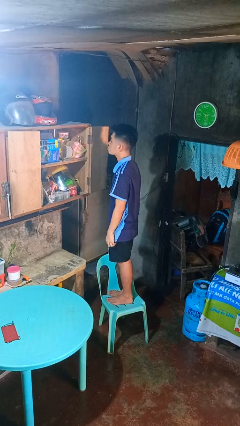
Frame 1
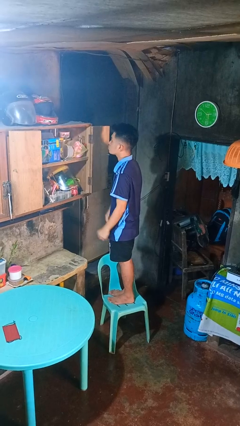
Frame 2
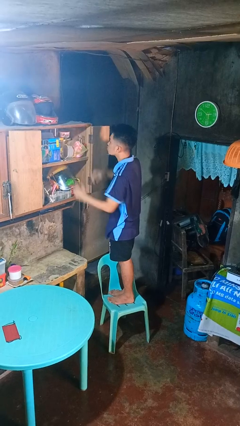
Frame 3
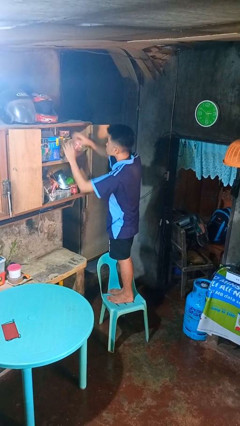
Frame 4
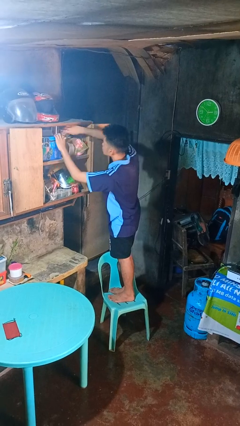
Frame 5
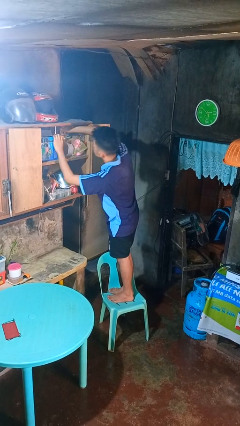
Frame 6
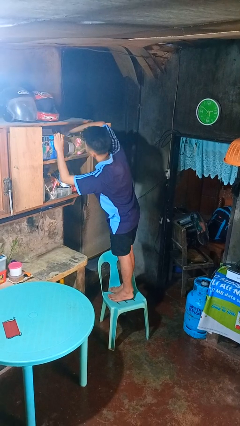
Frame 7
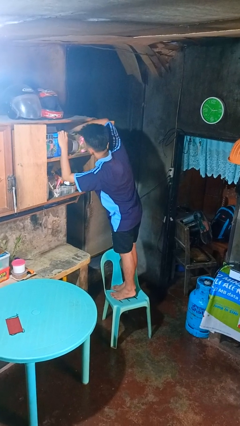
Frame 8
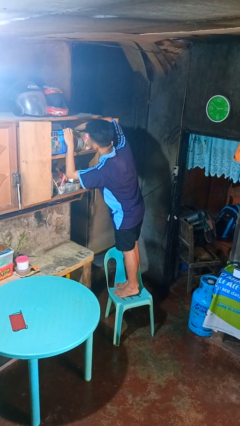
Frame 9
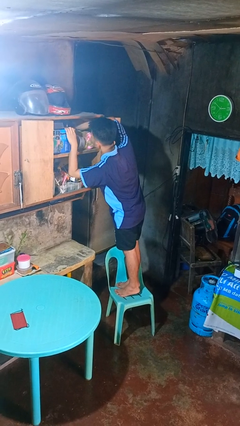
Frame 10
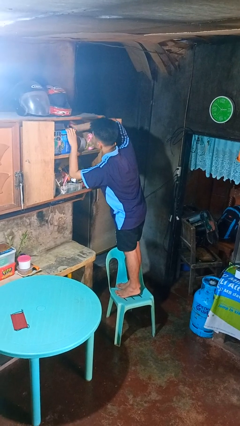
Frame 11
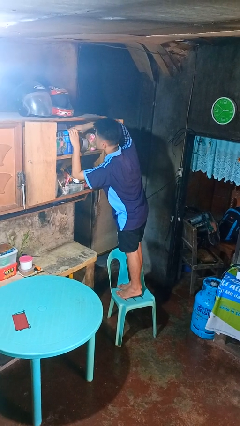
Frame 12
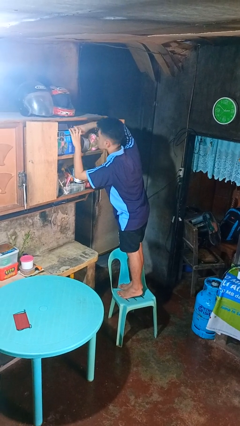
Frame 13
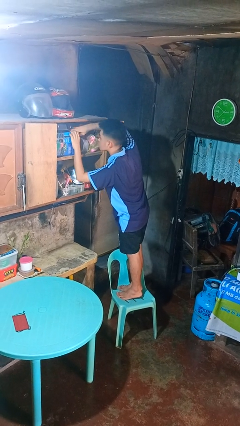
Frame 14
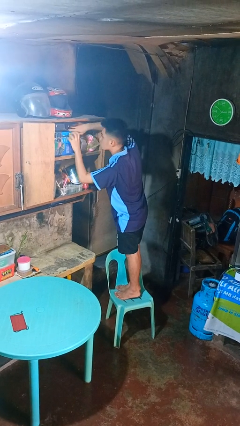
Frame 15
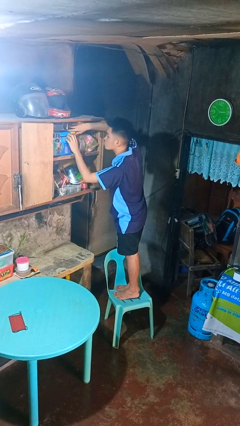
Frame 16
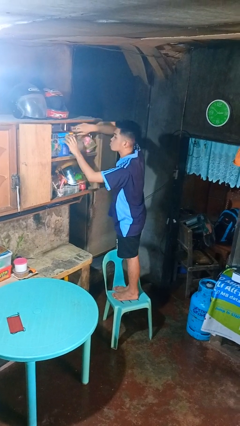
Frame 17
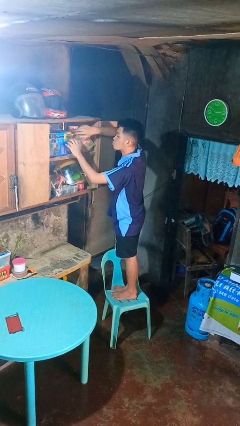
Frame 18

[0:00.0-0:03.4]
person searches in cabinet

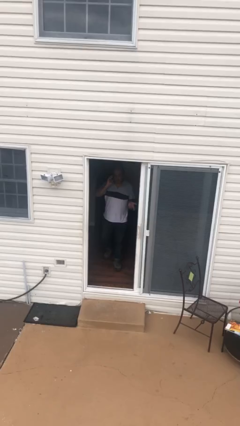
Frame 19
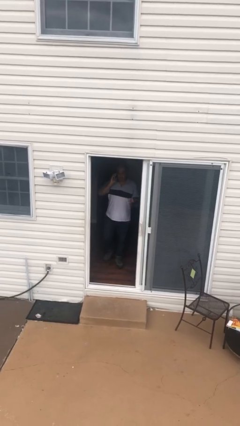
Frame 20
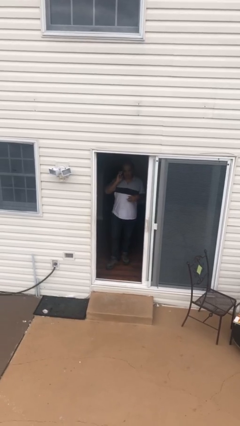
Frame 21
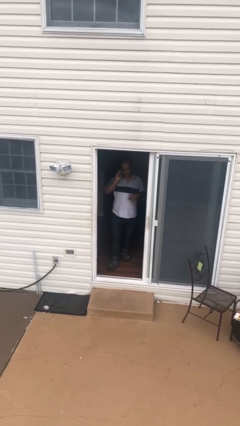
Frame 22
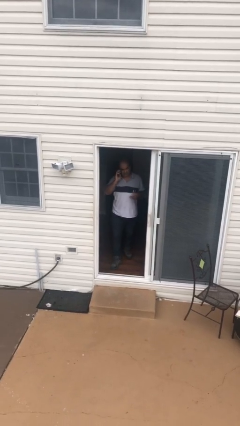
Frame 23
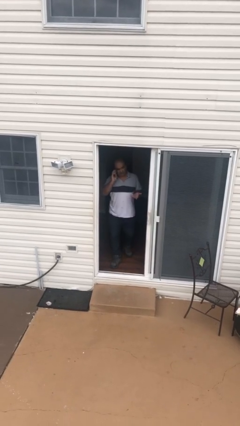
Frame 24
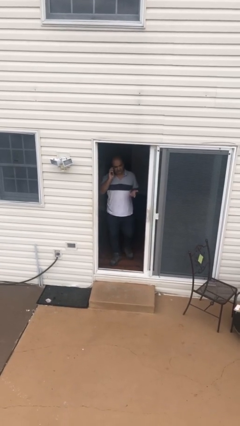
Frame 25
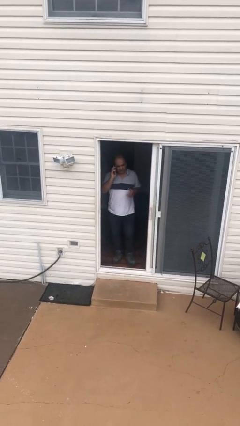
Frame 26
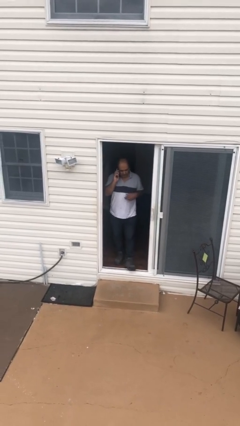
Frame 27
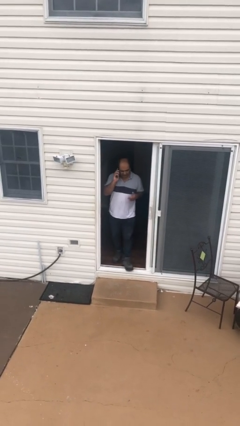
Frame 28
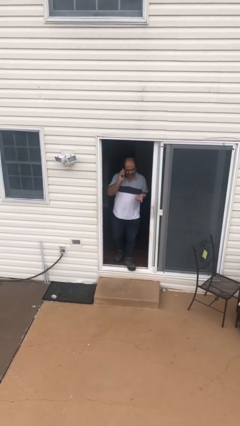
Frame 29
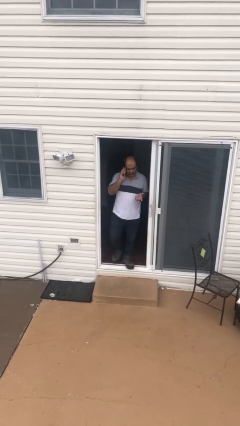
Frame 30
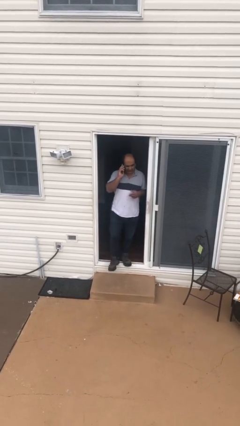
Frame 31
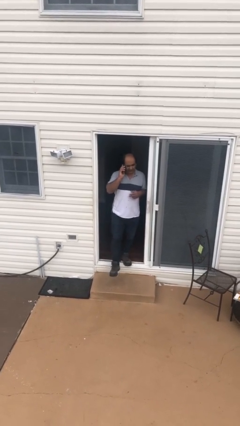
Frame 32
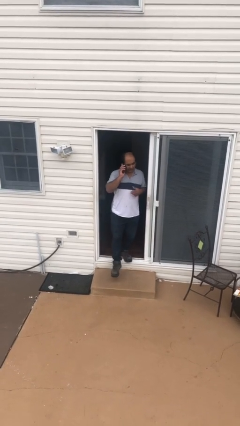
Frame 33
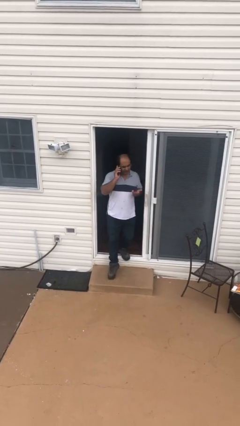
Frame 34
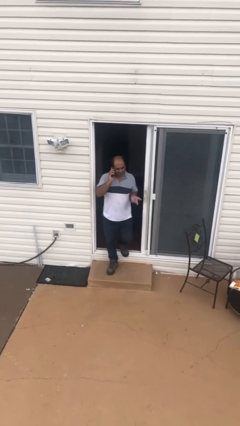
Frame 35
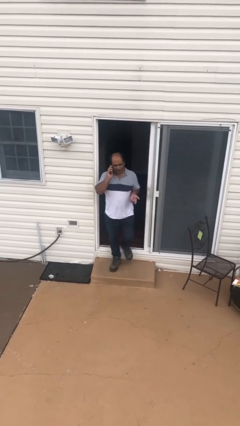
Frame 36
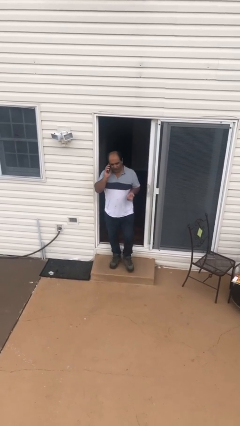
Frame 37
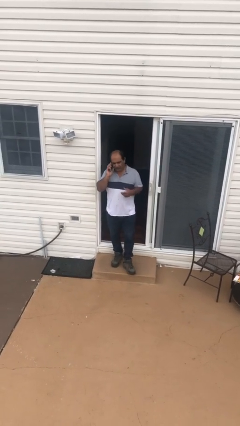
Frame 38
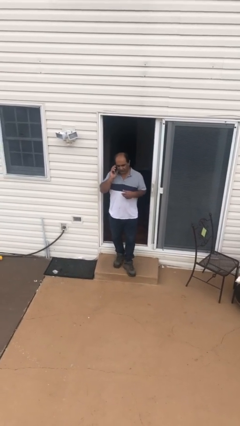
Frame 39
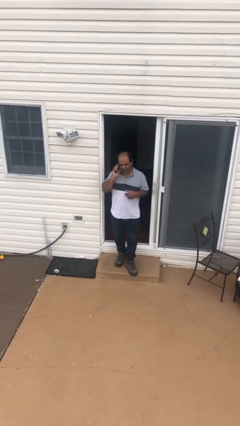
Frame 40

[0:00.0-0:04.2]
person enters scene through structure

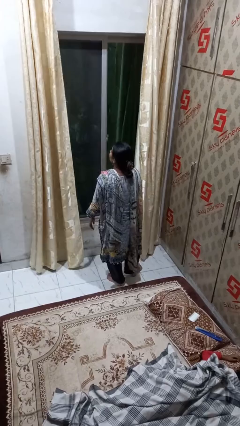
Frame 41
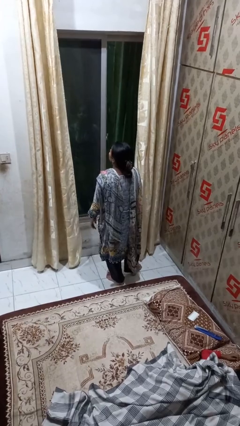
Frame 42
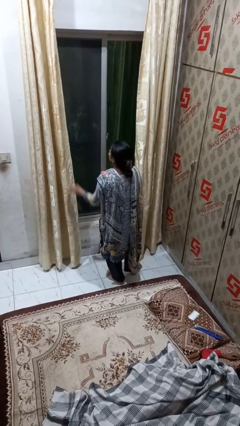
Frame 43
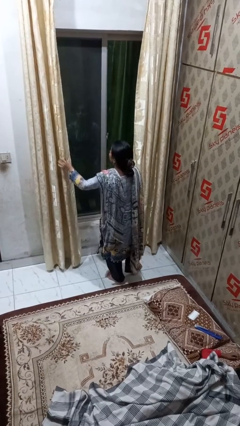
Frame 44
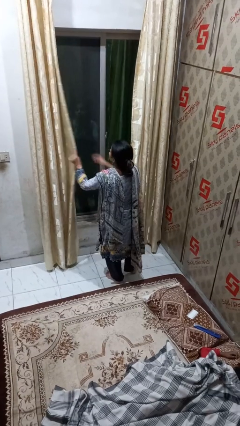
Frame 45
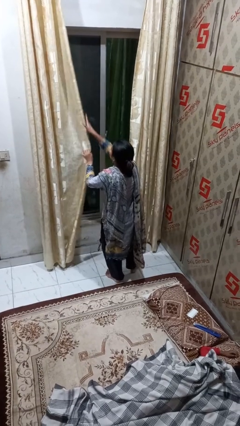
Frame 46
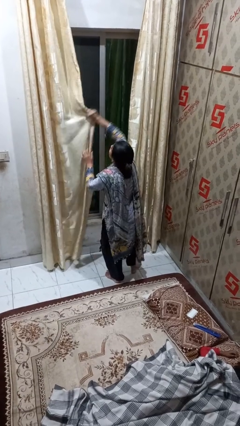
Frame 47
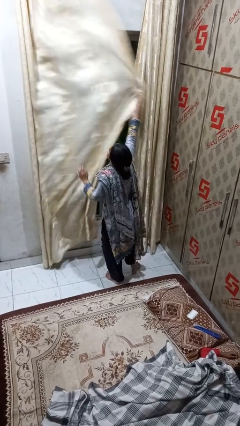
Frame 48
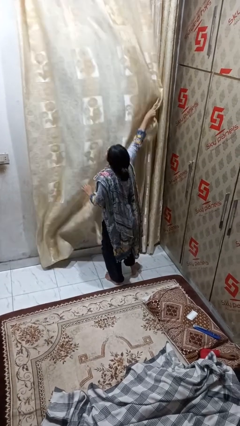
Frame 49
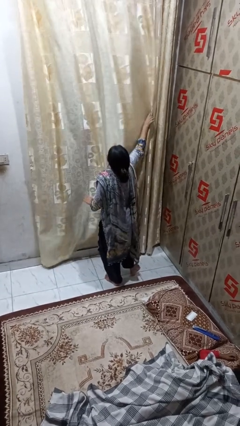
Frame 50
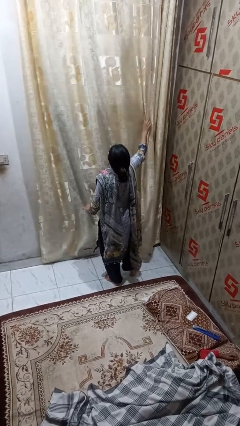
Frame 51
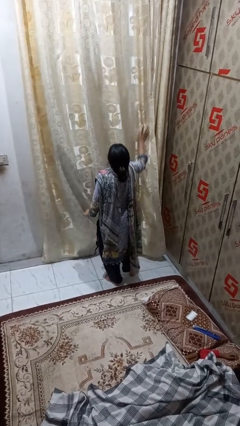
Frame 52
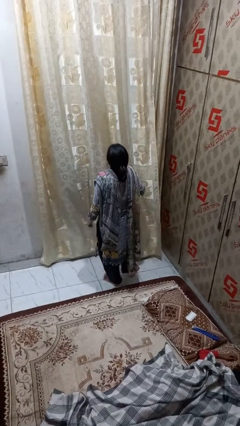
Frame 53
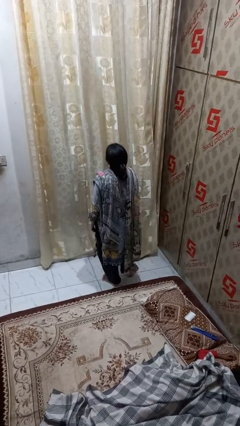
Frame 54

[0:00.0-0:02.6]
person closes curtains

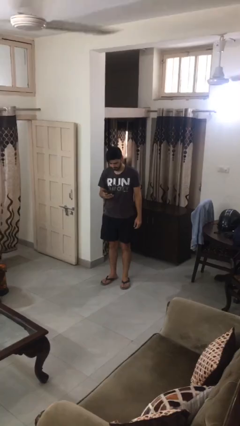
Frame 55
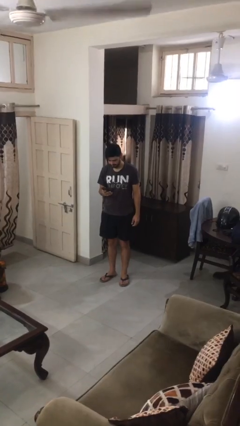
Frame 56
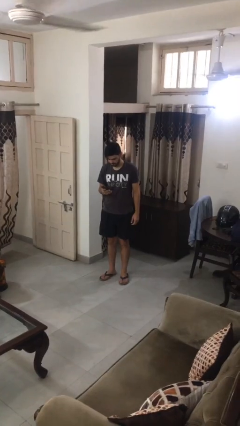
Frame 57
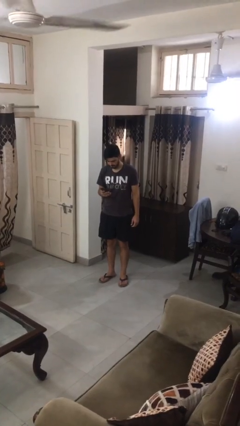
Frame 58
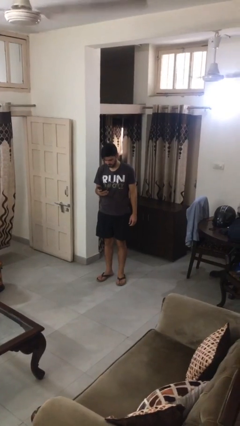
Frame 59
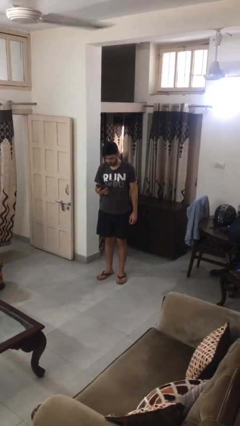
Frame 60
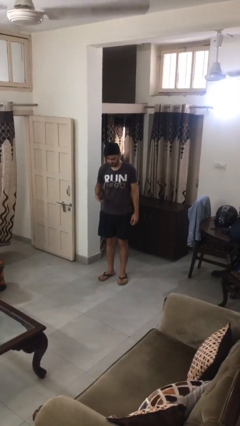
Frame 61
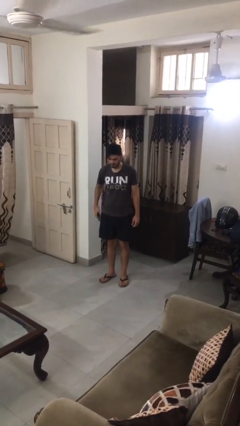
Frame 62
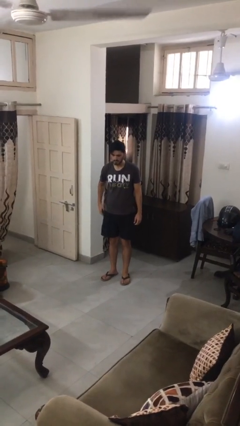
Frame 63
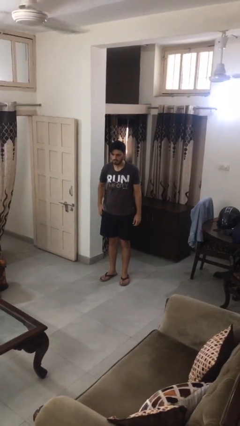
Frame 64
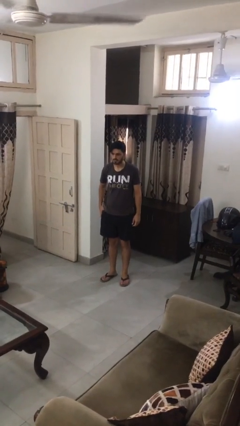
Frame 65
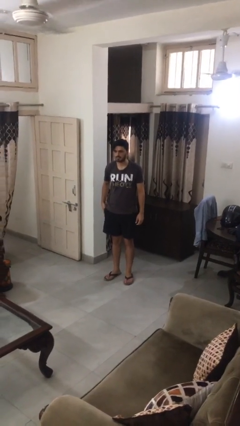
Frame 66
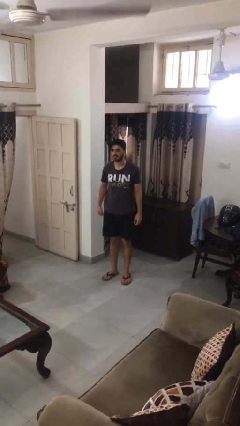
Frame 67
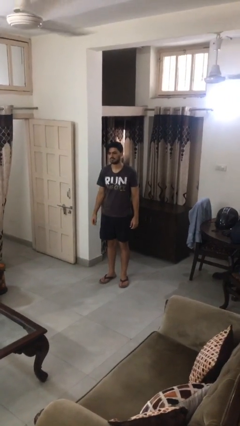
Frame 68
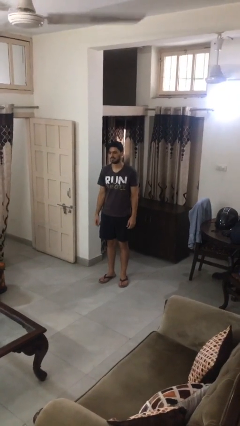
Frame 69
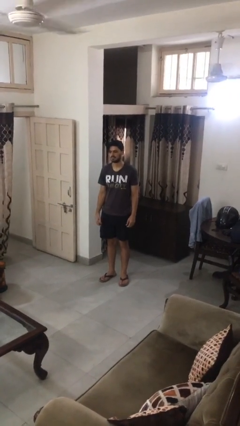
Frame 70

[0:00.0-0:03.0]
person puts phone into pocket

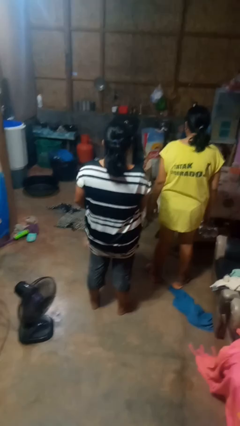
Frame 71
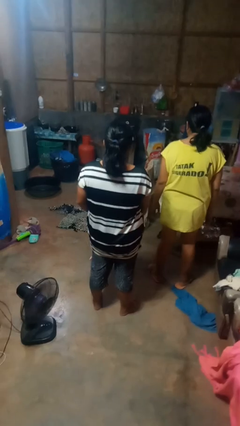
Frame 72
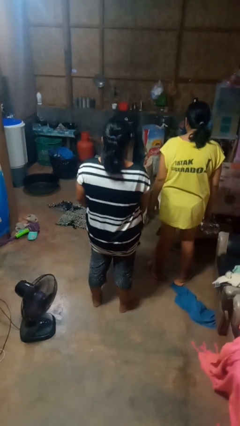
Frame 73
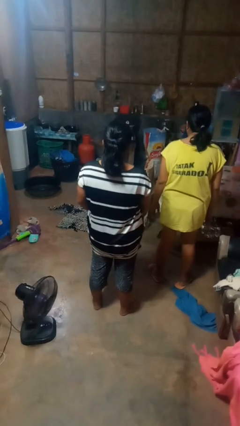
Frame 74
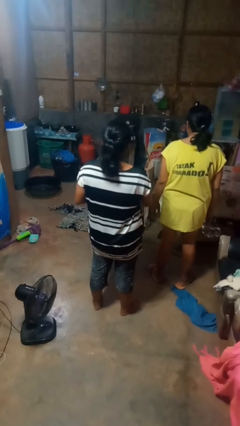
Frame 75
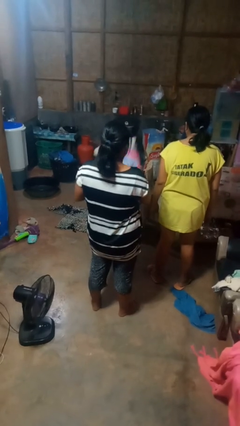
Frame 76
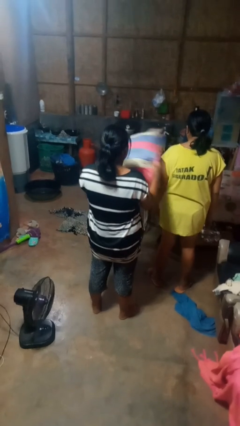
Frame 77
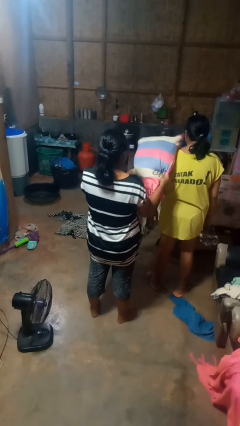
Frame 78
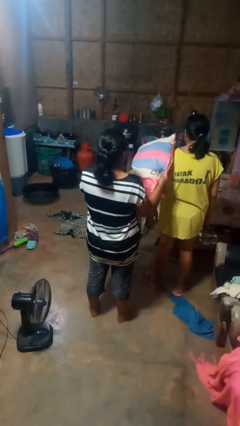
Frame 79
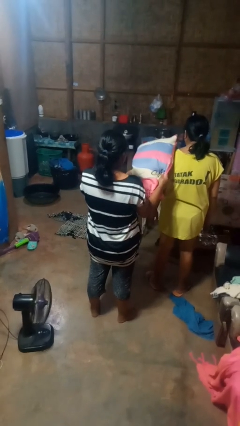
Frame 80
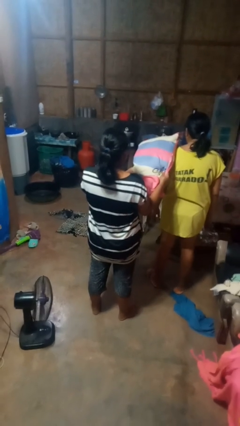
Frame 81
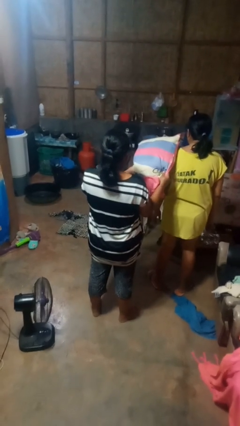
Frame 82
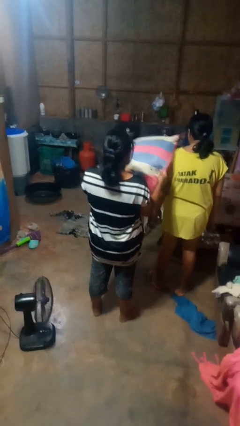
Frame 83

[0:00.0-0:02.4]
person hits person with pillow

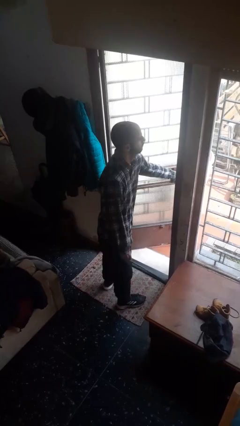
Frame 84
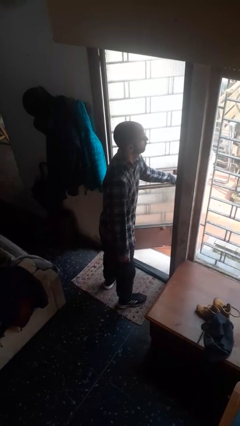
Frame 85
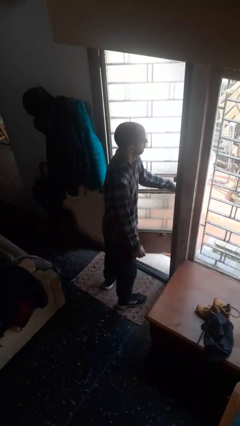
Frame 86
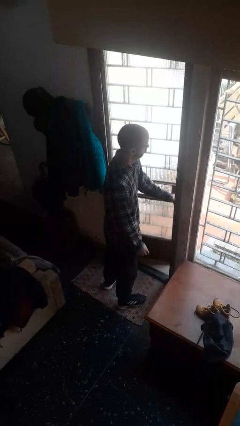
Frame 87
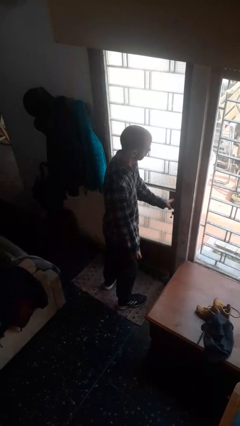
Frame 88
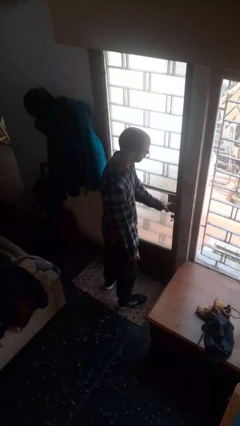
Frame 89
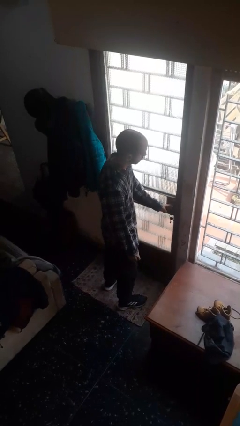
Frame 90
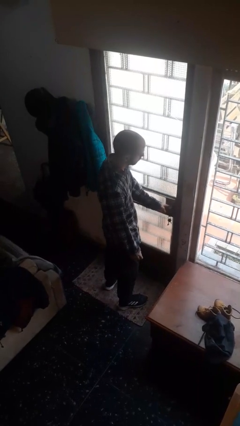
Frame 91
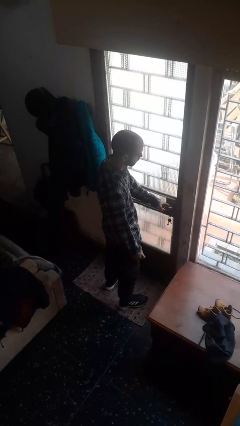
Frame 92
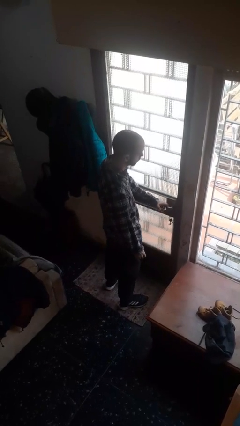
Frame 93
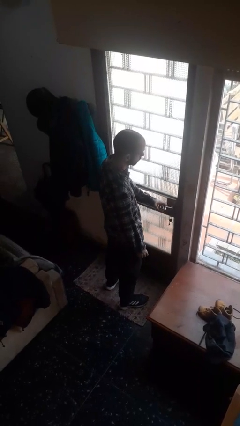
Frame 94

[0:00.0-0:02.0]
person closes facility door
